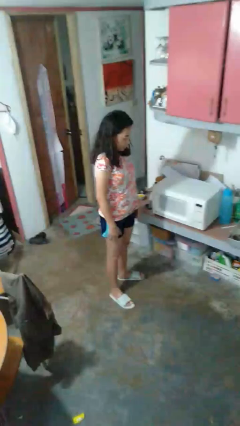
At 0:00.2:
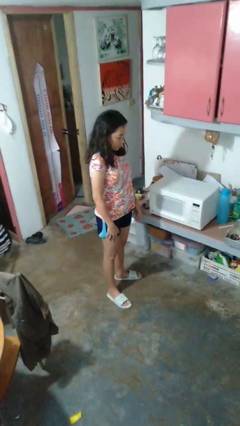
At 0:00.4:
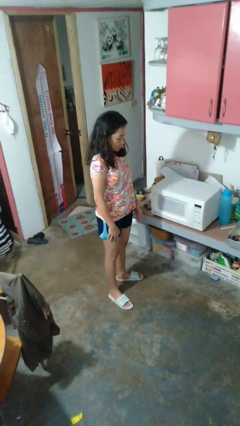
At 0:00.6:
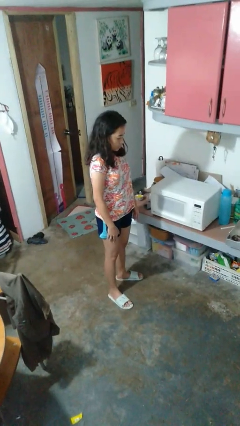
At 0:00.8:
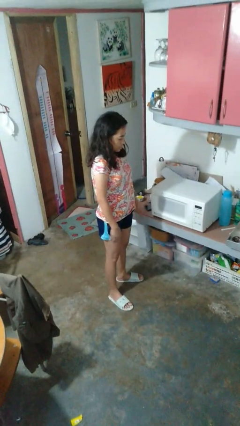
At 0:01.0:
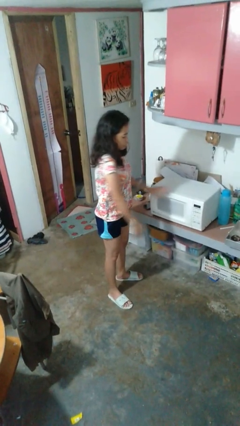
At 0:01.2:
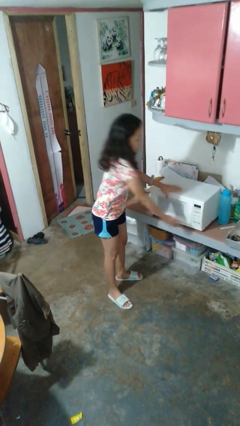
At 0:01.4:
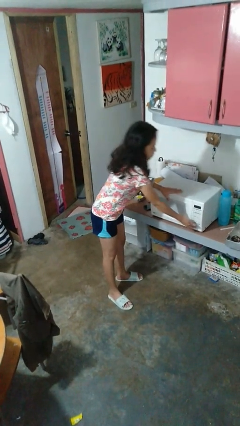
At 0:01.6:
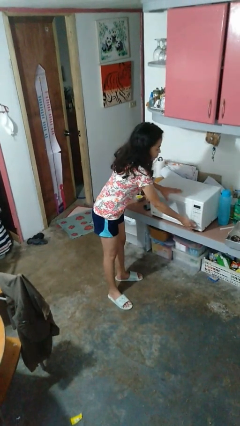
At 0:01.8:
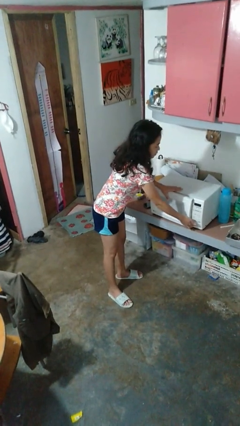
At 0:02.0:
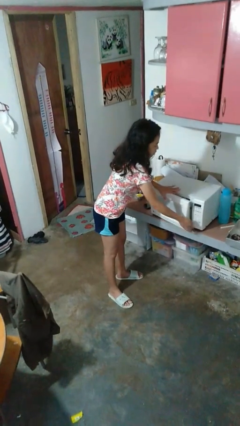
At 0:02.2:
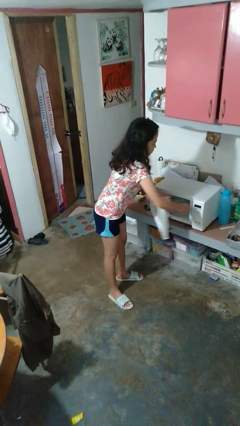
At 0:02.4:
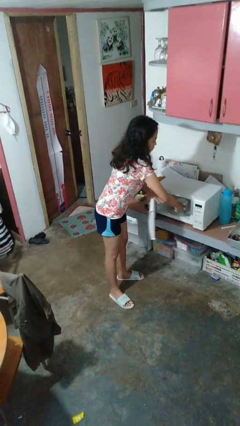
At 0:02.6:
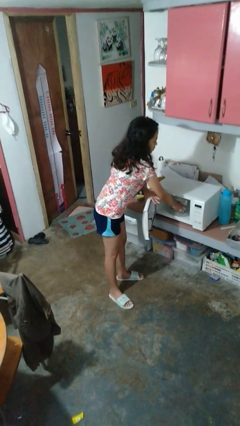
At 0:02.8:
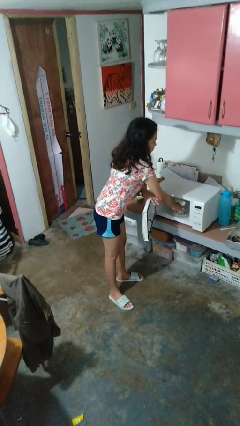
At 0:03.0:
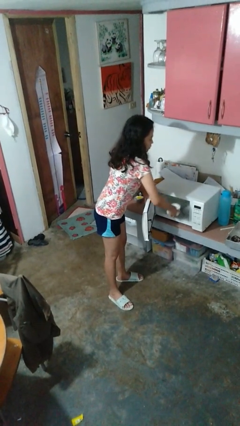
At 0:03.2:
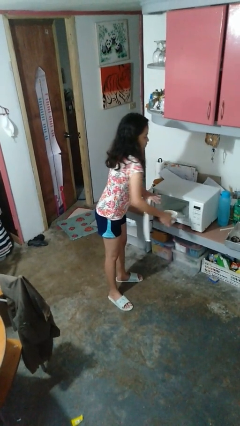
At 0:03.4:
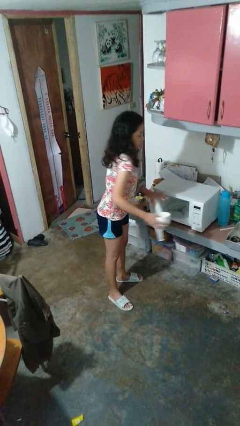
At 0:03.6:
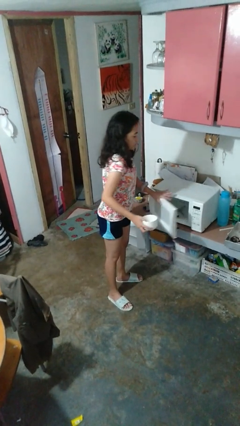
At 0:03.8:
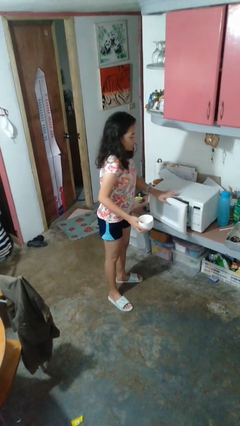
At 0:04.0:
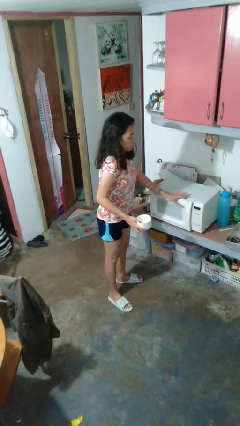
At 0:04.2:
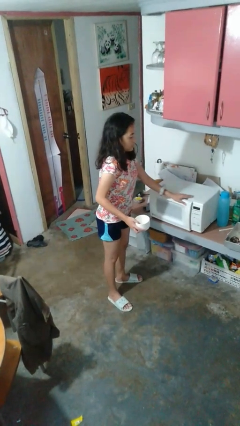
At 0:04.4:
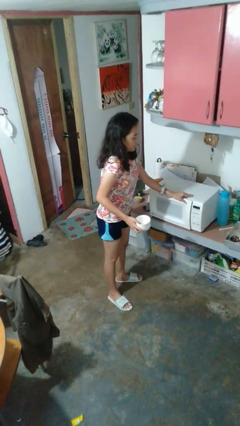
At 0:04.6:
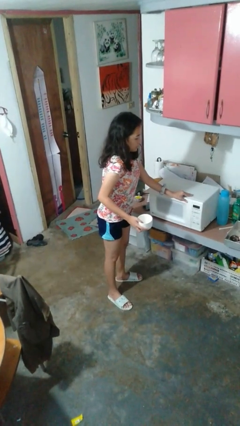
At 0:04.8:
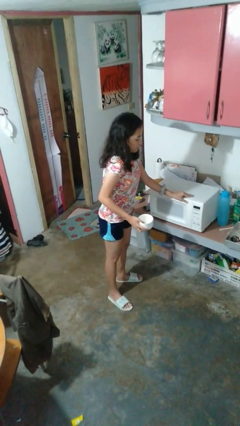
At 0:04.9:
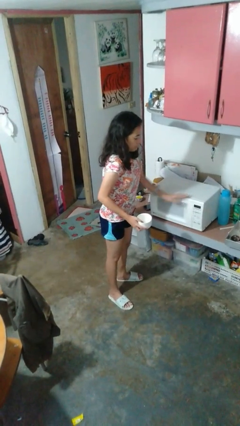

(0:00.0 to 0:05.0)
person takes object from microwave

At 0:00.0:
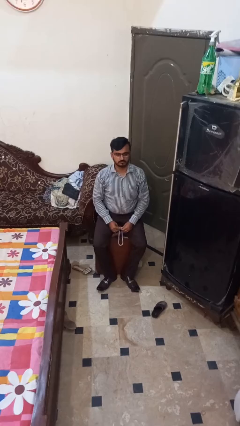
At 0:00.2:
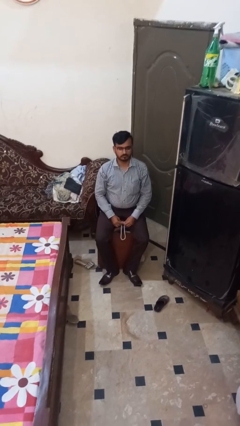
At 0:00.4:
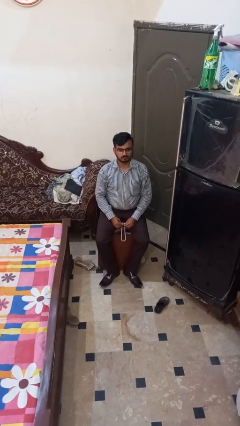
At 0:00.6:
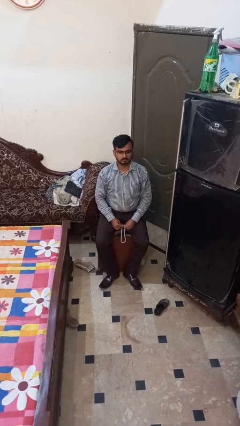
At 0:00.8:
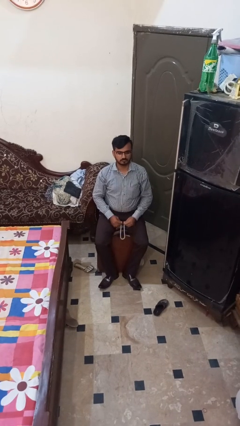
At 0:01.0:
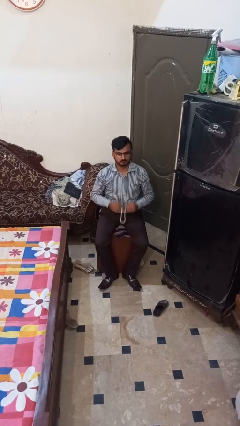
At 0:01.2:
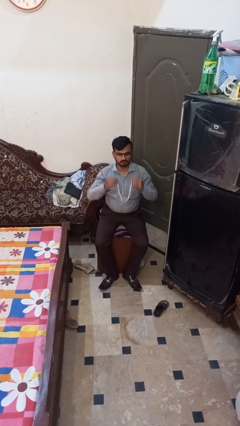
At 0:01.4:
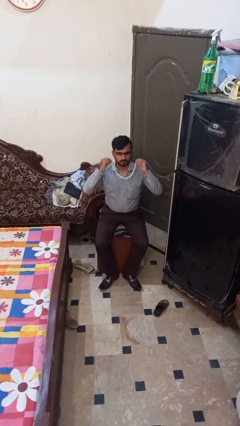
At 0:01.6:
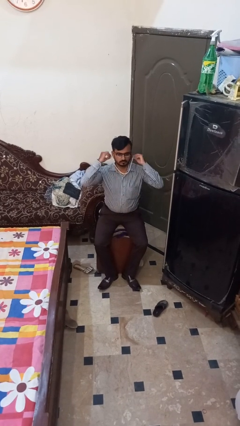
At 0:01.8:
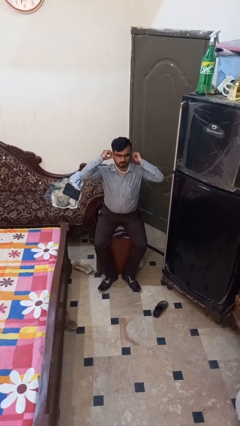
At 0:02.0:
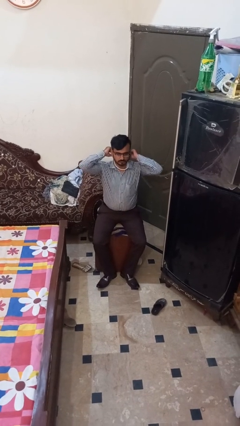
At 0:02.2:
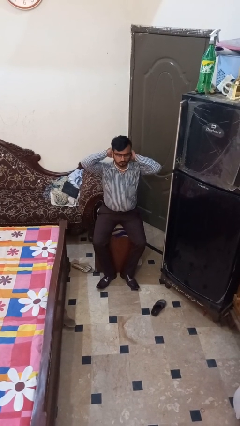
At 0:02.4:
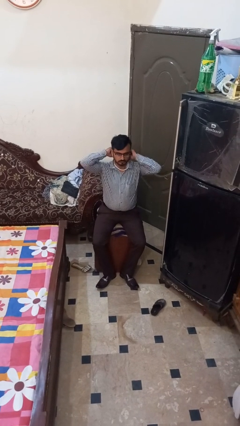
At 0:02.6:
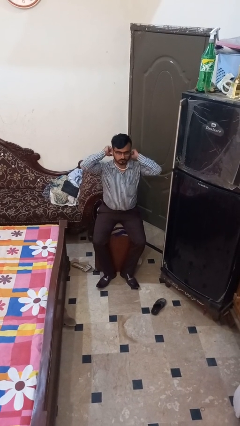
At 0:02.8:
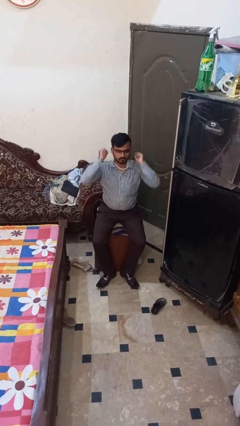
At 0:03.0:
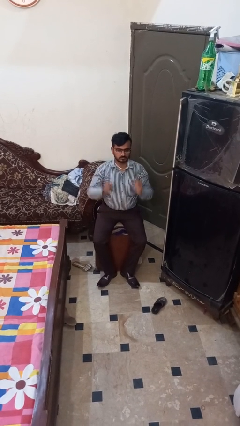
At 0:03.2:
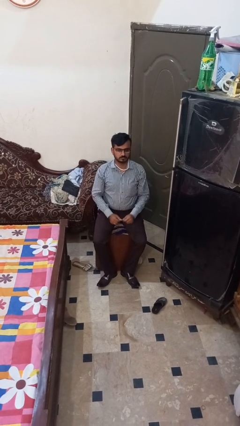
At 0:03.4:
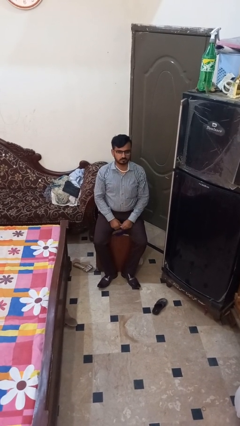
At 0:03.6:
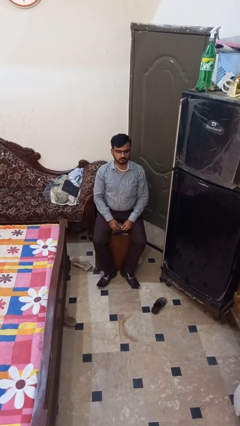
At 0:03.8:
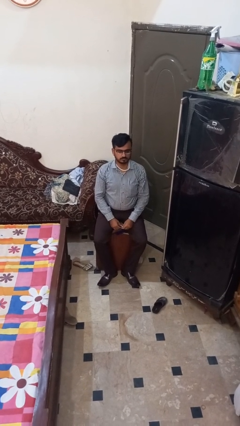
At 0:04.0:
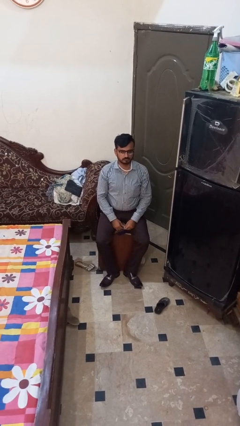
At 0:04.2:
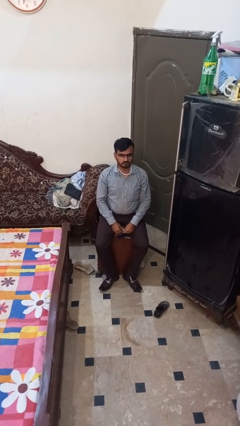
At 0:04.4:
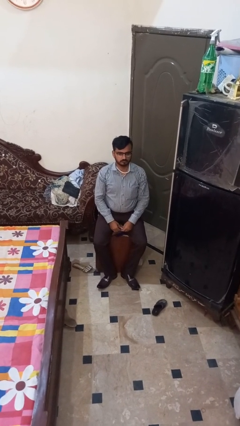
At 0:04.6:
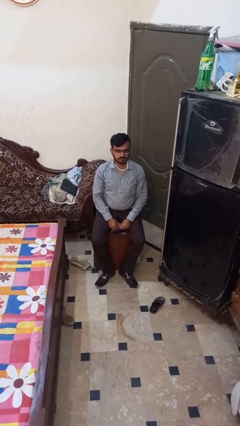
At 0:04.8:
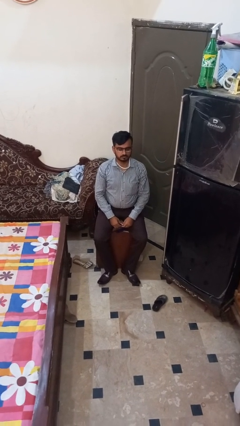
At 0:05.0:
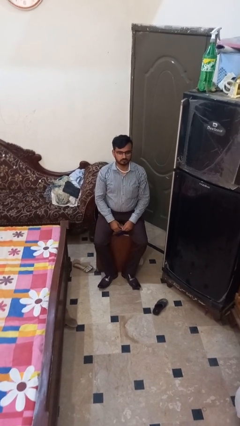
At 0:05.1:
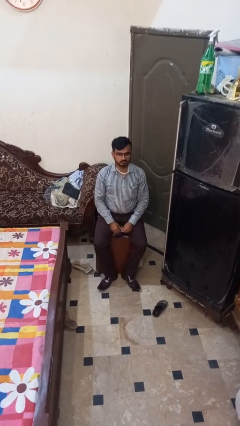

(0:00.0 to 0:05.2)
person puts on necklace

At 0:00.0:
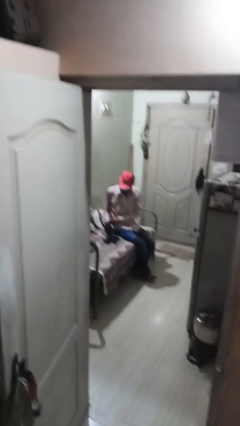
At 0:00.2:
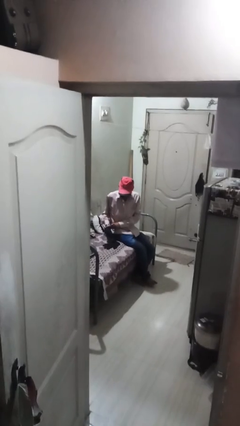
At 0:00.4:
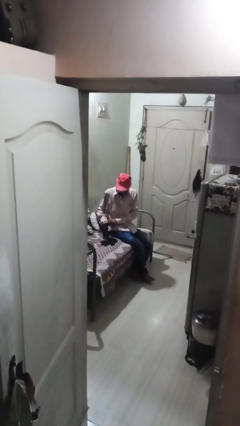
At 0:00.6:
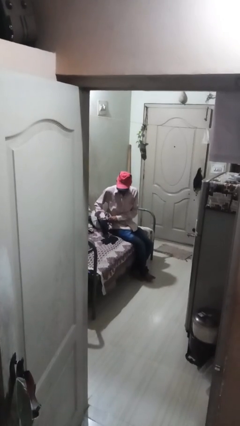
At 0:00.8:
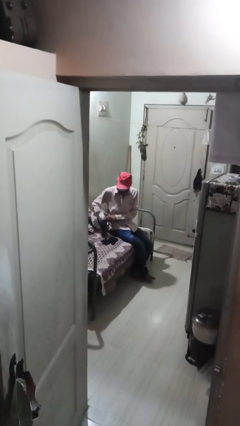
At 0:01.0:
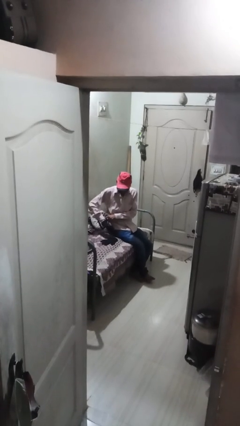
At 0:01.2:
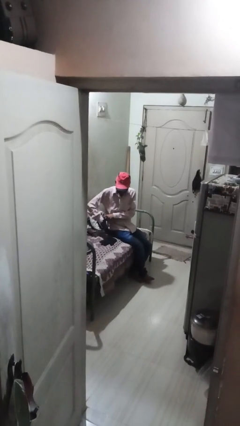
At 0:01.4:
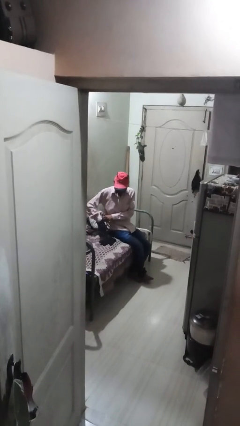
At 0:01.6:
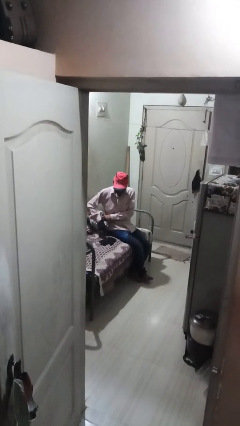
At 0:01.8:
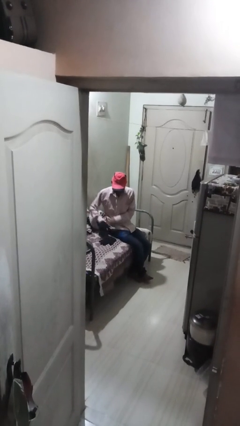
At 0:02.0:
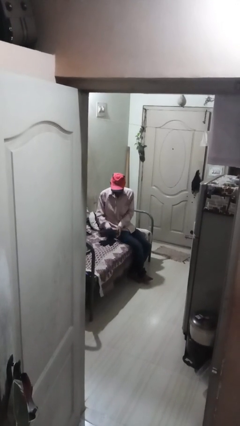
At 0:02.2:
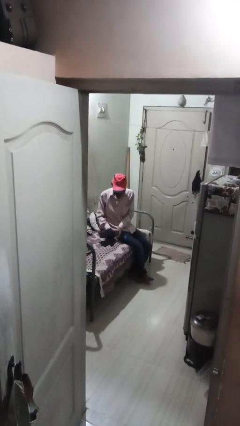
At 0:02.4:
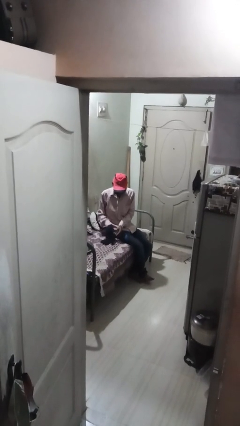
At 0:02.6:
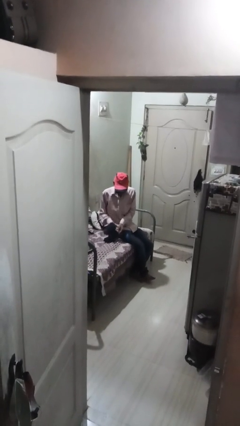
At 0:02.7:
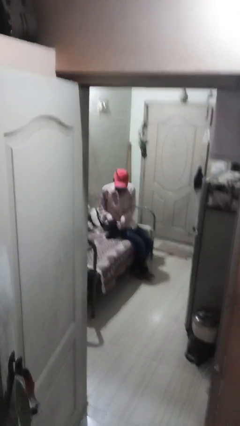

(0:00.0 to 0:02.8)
person puts on gloves

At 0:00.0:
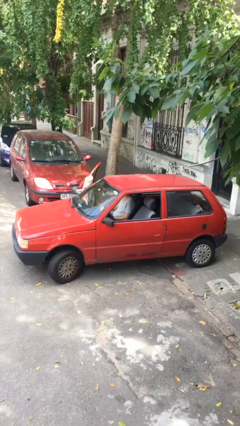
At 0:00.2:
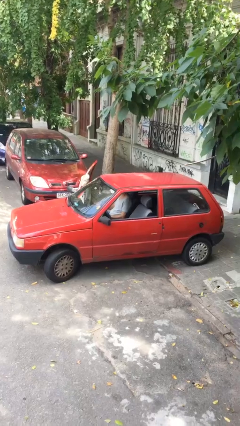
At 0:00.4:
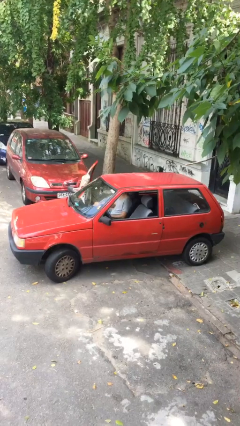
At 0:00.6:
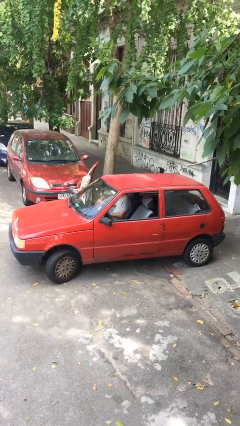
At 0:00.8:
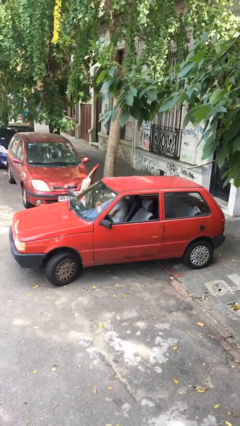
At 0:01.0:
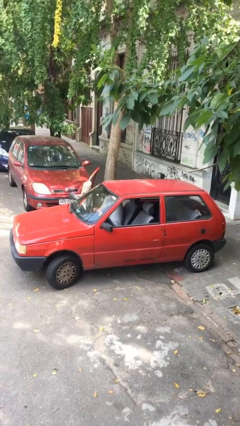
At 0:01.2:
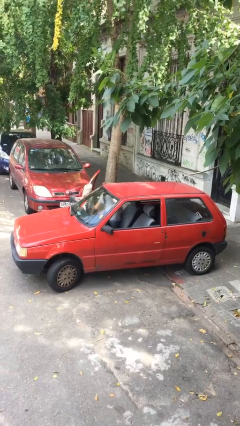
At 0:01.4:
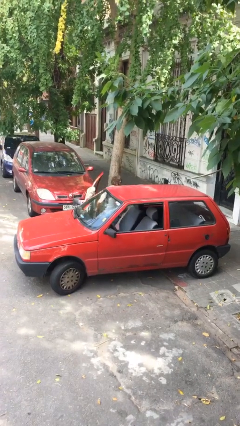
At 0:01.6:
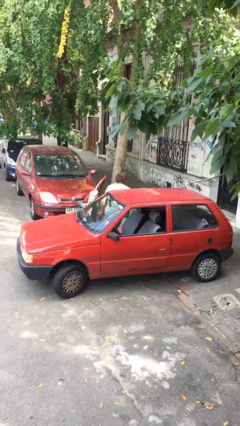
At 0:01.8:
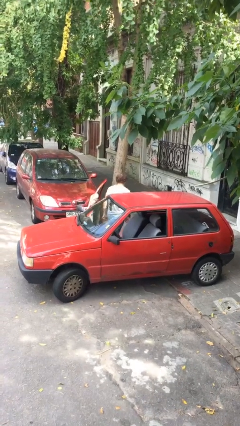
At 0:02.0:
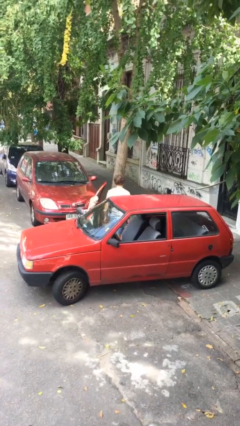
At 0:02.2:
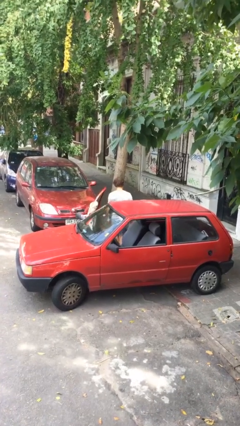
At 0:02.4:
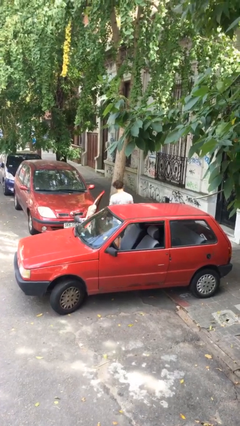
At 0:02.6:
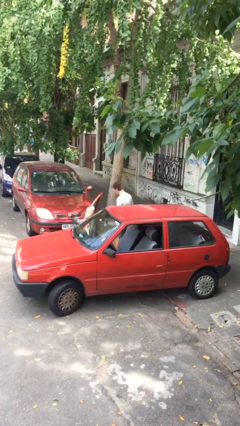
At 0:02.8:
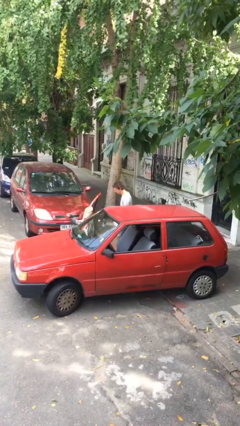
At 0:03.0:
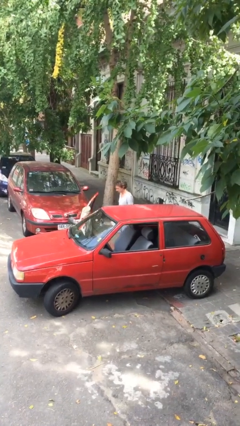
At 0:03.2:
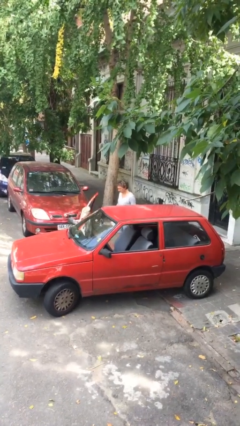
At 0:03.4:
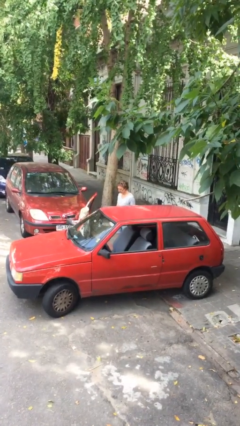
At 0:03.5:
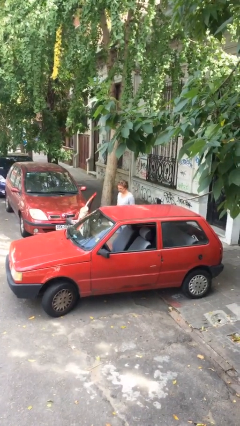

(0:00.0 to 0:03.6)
person exits car

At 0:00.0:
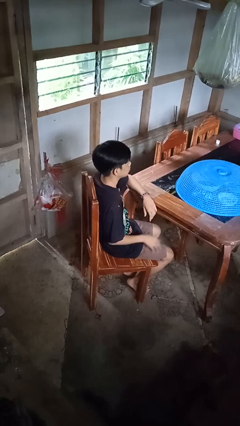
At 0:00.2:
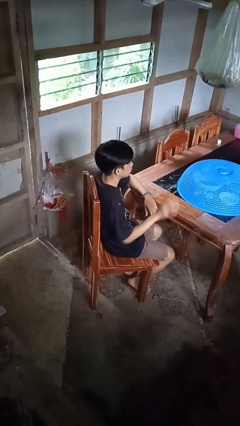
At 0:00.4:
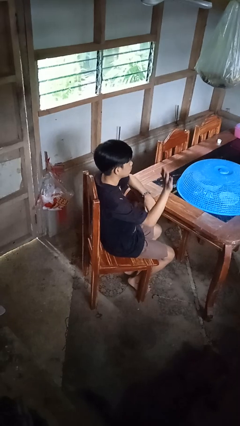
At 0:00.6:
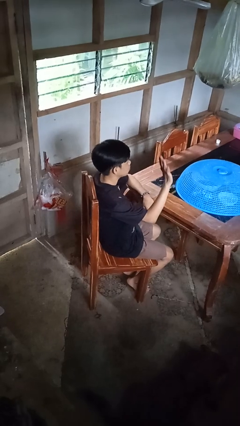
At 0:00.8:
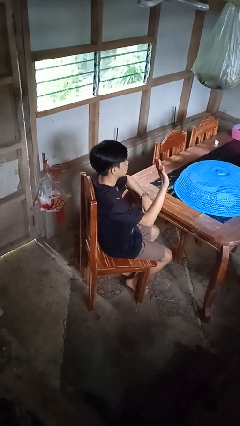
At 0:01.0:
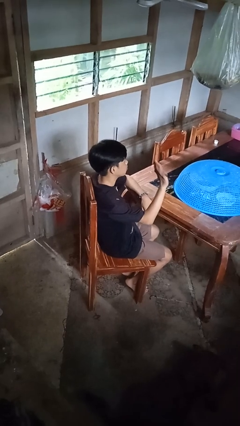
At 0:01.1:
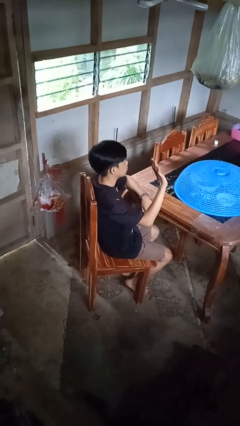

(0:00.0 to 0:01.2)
person waves at person
